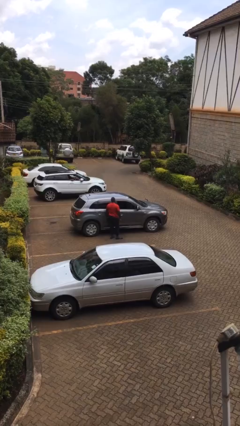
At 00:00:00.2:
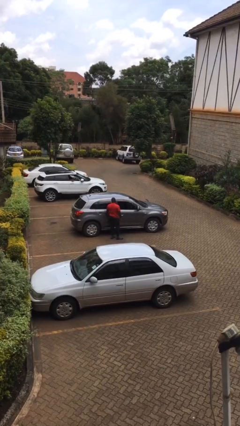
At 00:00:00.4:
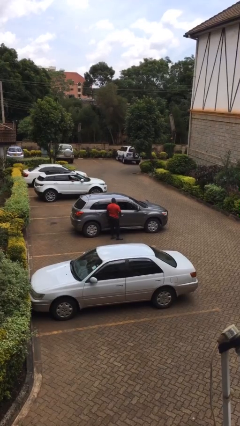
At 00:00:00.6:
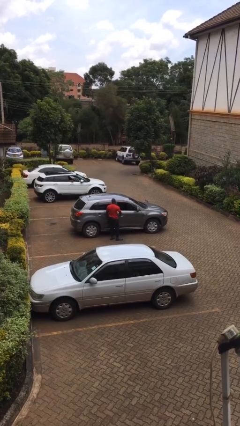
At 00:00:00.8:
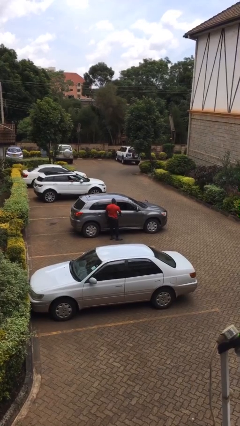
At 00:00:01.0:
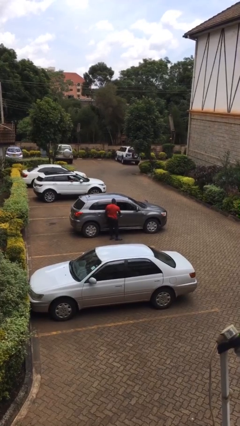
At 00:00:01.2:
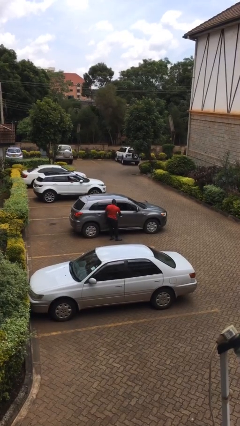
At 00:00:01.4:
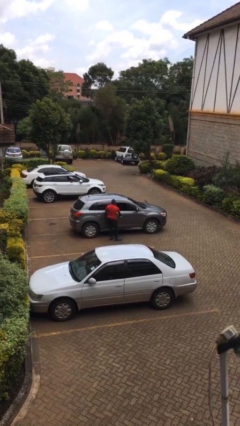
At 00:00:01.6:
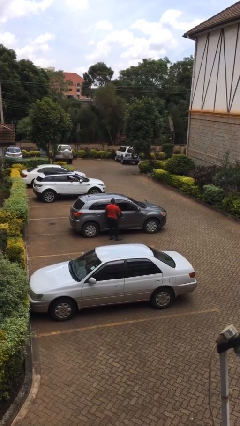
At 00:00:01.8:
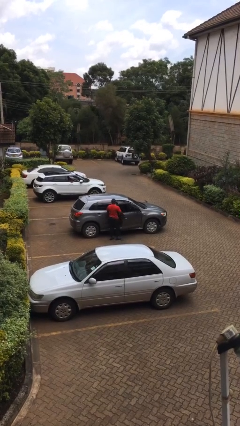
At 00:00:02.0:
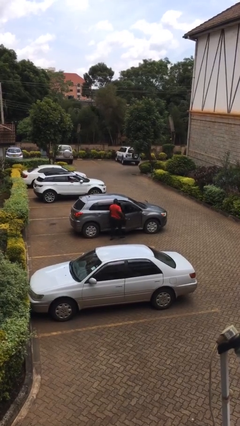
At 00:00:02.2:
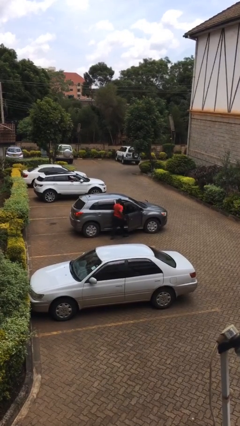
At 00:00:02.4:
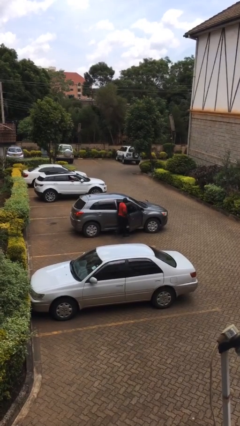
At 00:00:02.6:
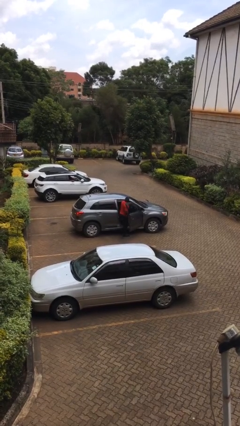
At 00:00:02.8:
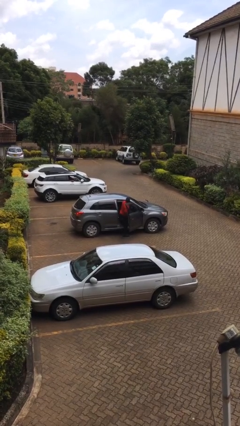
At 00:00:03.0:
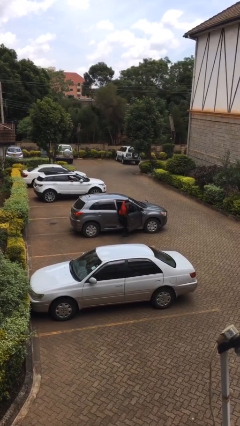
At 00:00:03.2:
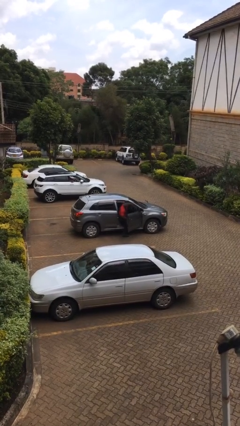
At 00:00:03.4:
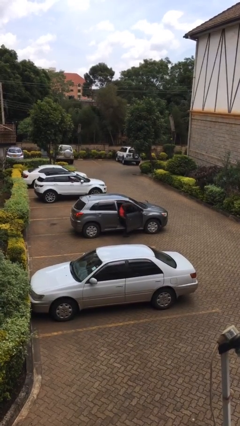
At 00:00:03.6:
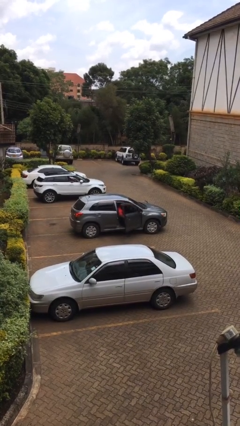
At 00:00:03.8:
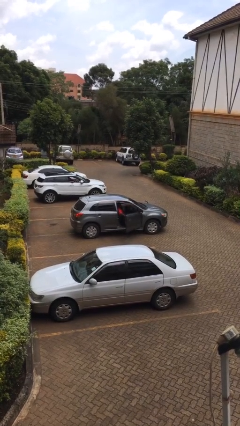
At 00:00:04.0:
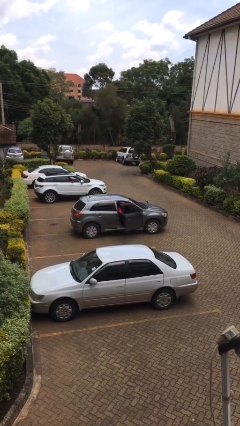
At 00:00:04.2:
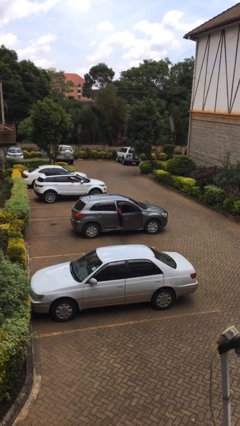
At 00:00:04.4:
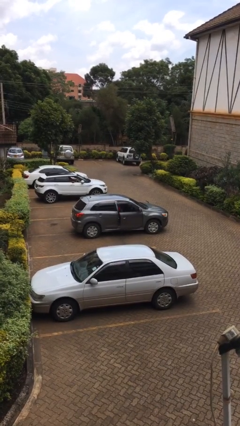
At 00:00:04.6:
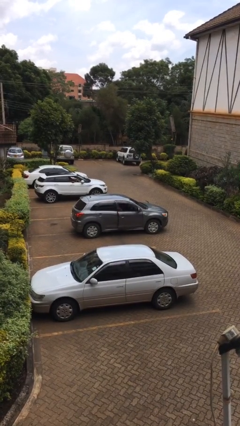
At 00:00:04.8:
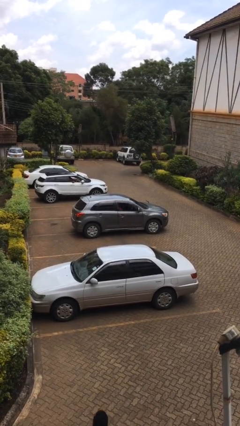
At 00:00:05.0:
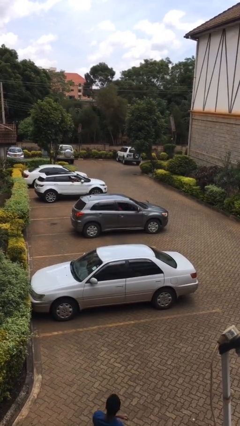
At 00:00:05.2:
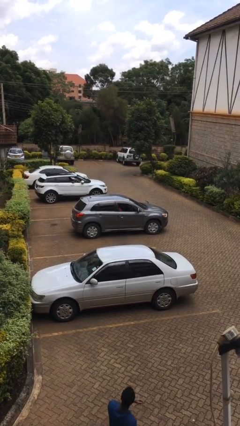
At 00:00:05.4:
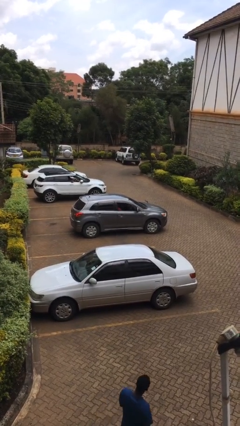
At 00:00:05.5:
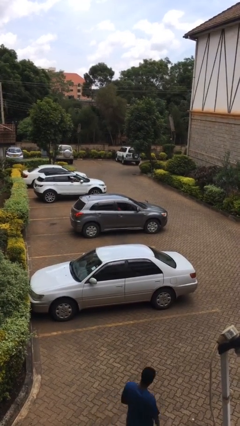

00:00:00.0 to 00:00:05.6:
car picks up person

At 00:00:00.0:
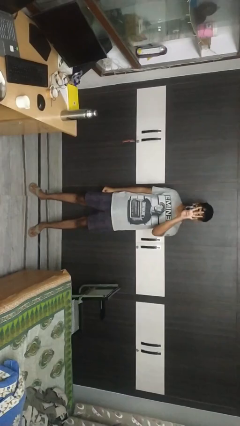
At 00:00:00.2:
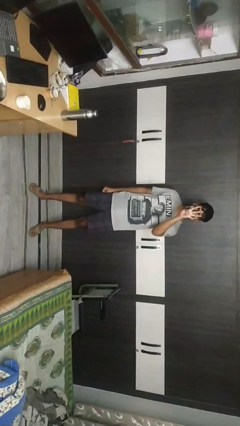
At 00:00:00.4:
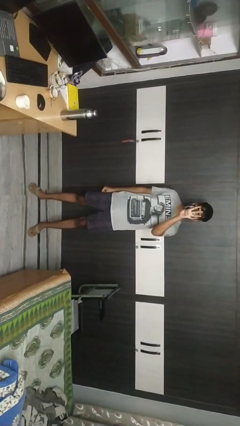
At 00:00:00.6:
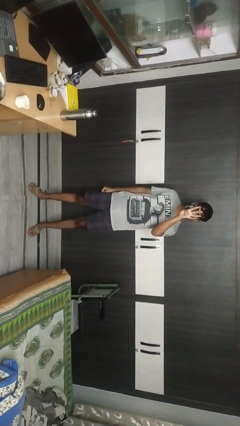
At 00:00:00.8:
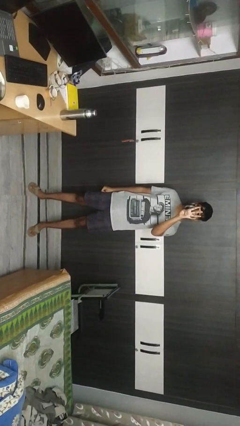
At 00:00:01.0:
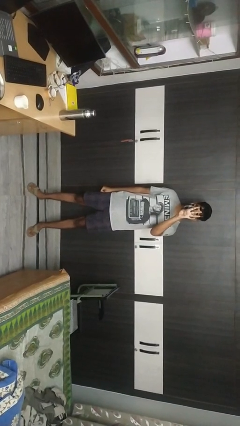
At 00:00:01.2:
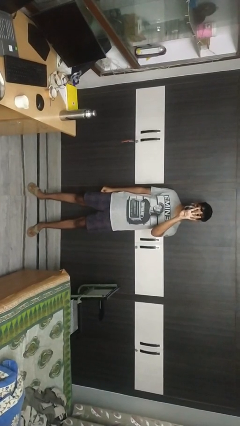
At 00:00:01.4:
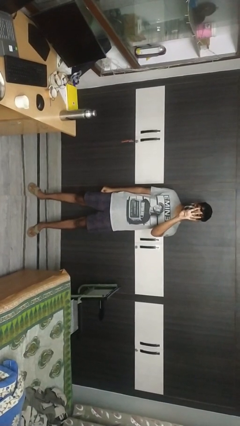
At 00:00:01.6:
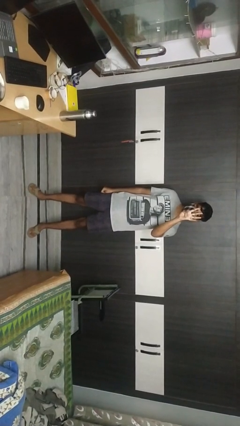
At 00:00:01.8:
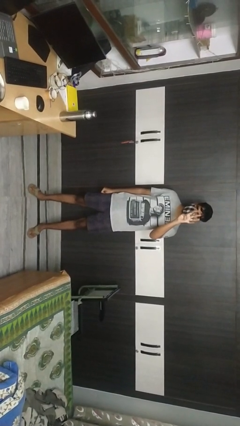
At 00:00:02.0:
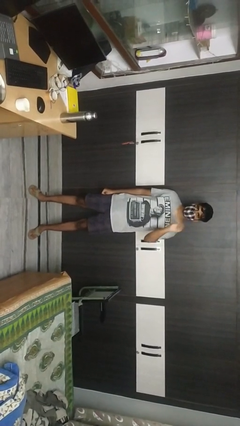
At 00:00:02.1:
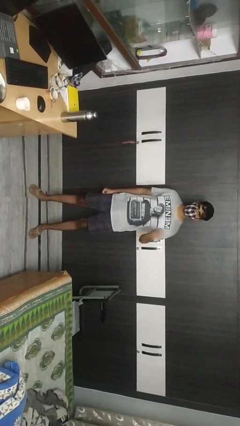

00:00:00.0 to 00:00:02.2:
person gestures number four

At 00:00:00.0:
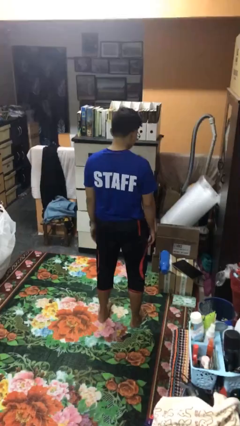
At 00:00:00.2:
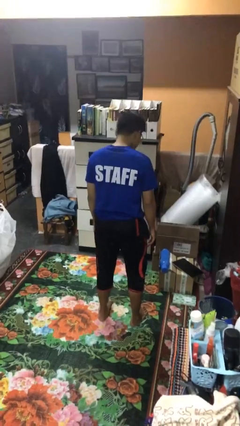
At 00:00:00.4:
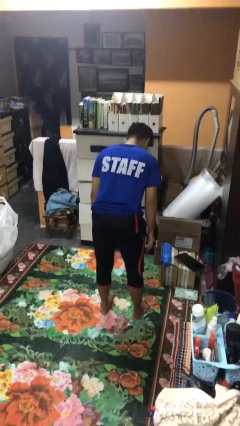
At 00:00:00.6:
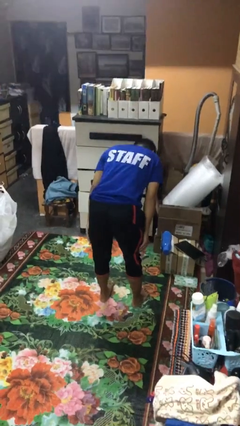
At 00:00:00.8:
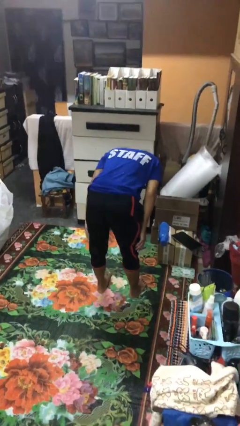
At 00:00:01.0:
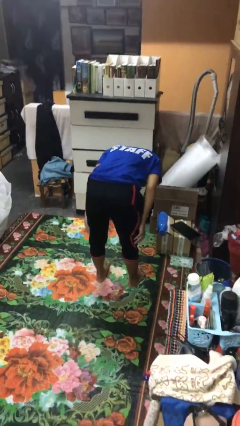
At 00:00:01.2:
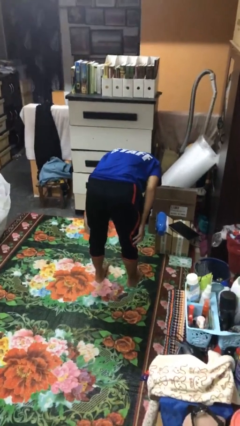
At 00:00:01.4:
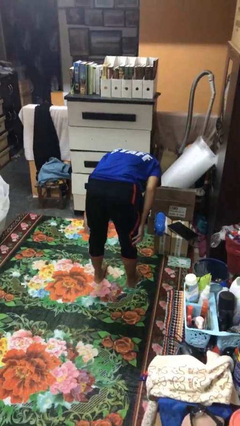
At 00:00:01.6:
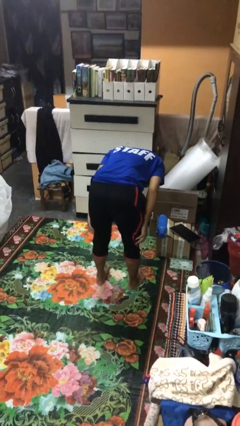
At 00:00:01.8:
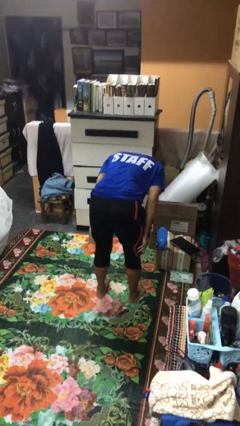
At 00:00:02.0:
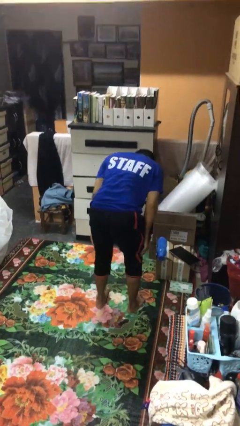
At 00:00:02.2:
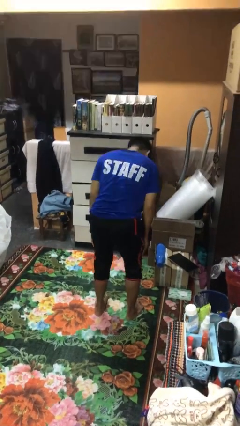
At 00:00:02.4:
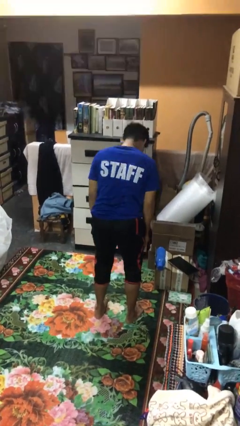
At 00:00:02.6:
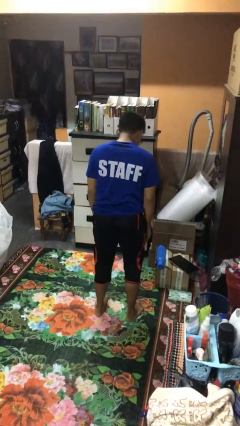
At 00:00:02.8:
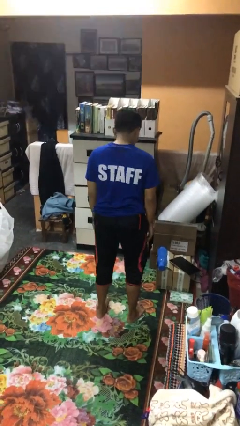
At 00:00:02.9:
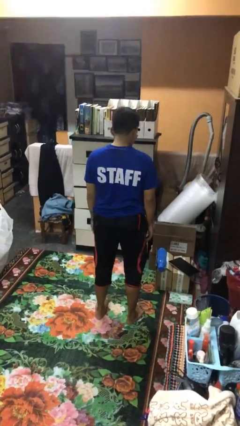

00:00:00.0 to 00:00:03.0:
person bows

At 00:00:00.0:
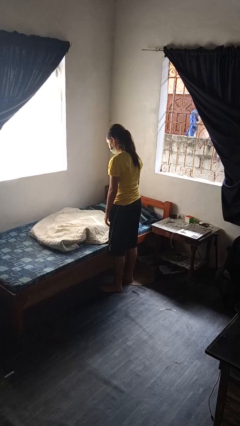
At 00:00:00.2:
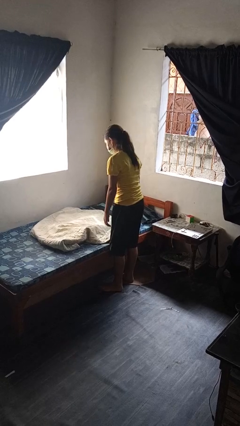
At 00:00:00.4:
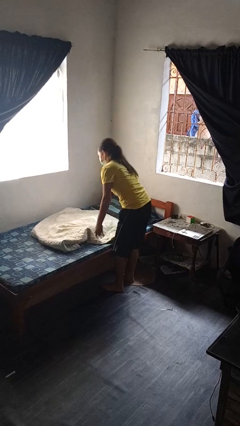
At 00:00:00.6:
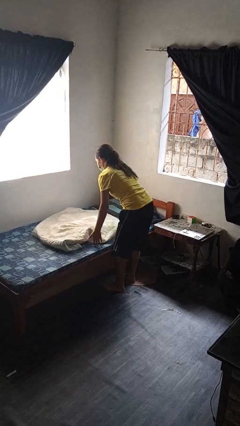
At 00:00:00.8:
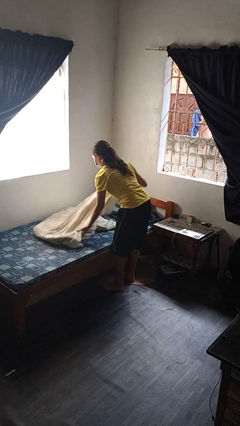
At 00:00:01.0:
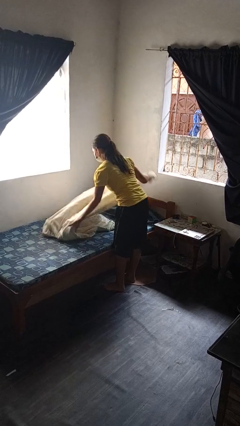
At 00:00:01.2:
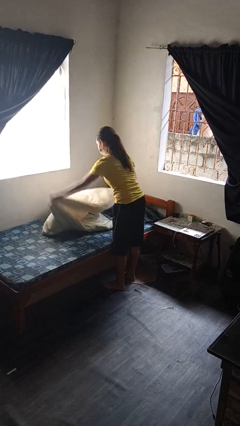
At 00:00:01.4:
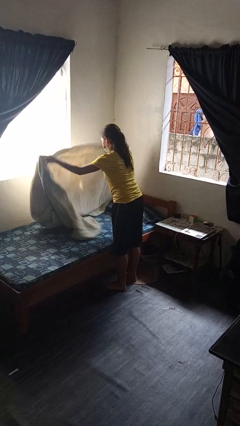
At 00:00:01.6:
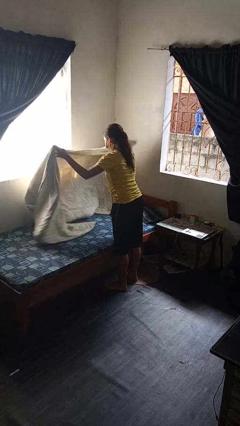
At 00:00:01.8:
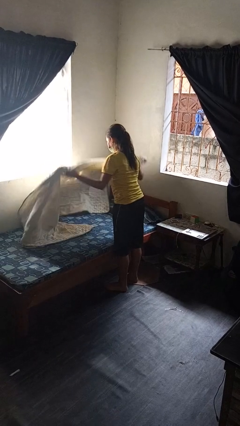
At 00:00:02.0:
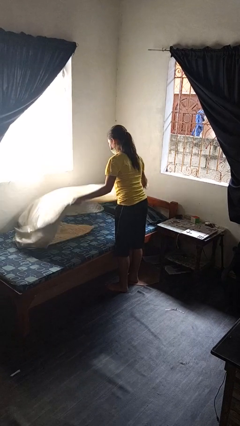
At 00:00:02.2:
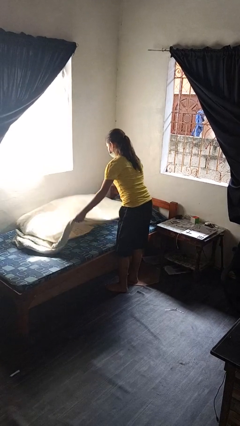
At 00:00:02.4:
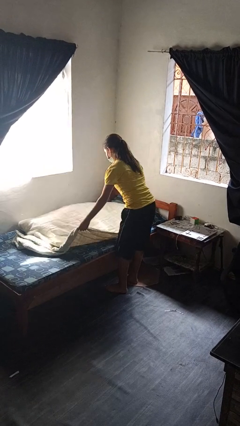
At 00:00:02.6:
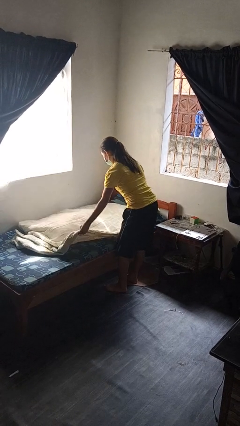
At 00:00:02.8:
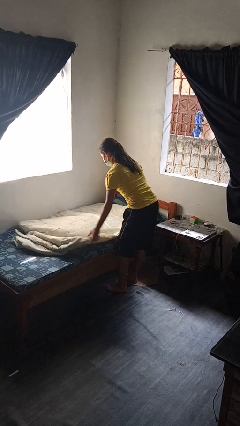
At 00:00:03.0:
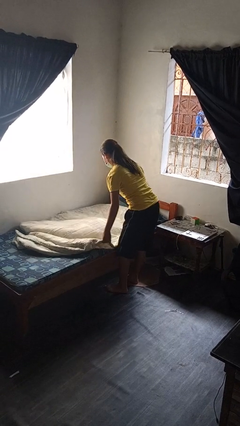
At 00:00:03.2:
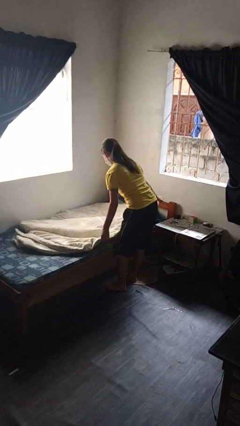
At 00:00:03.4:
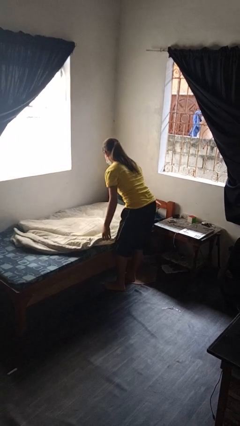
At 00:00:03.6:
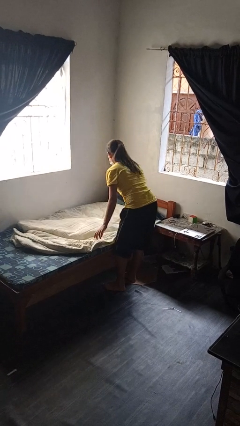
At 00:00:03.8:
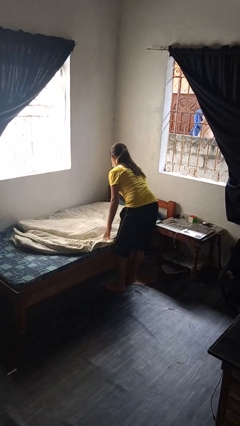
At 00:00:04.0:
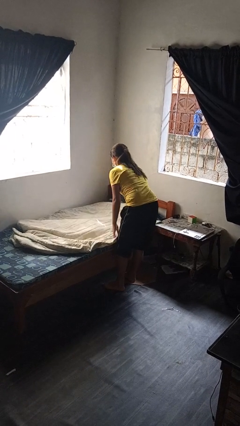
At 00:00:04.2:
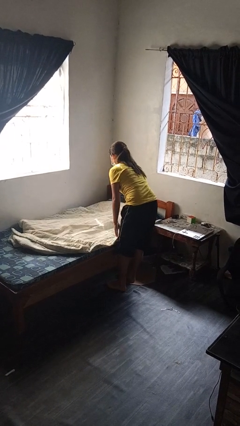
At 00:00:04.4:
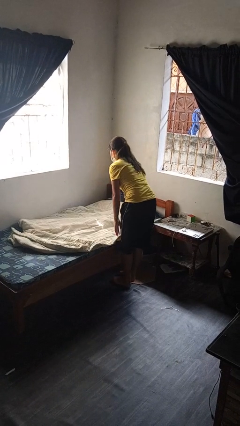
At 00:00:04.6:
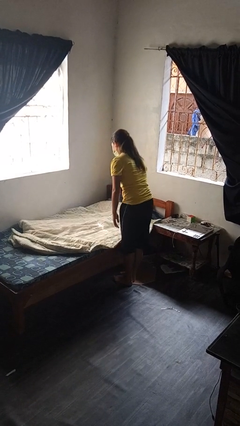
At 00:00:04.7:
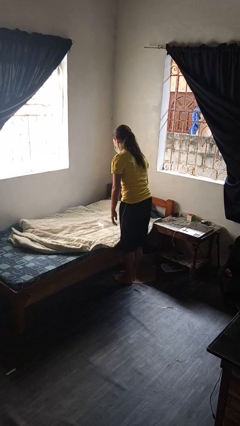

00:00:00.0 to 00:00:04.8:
person makes bed

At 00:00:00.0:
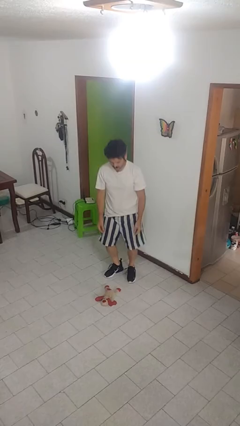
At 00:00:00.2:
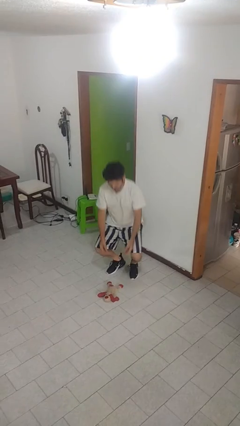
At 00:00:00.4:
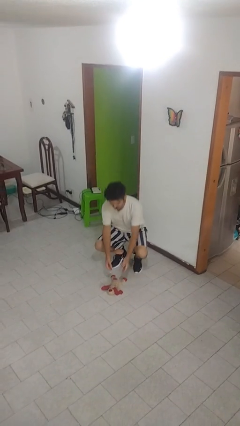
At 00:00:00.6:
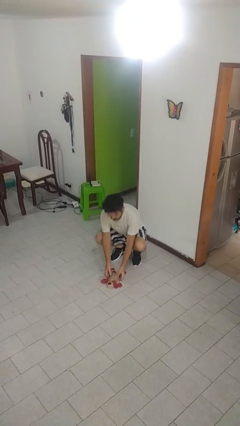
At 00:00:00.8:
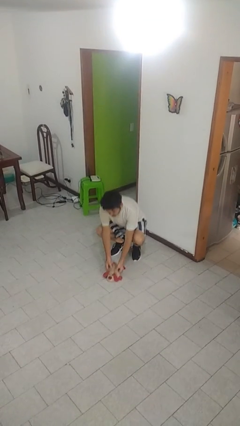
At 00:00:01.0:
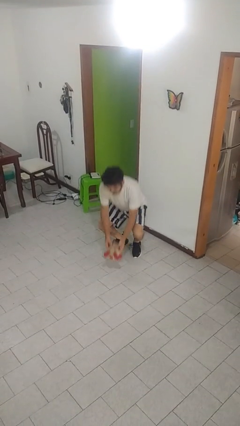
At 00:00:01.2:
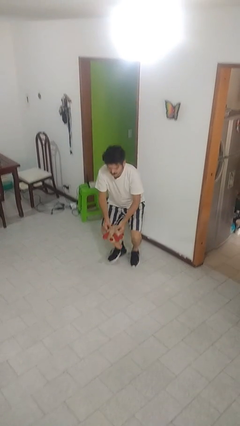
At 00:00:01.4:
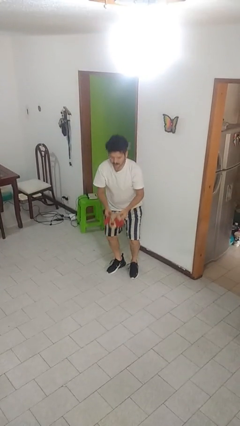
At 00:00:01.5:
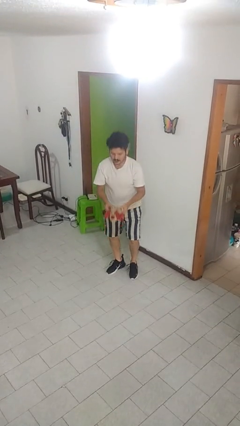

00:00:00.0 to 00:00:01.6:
person picks up object from floor
